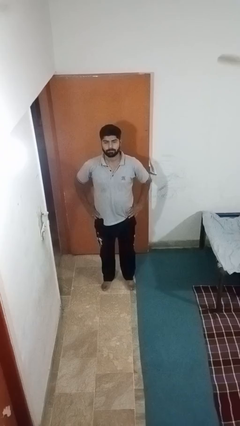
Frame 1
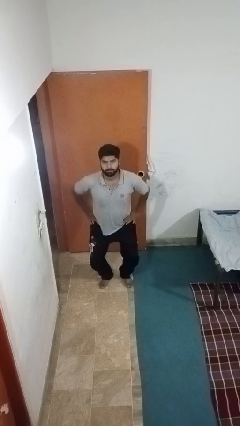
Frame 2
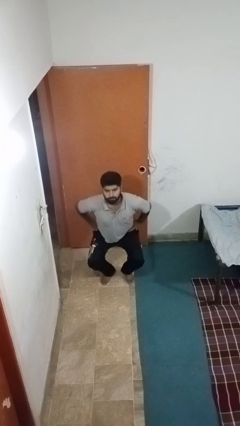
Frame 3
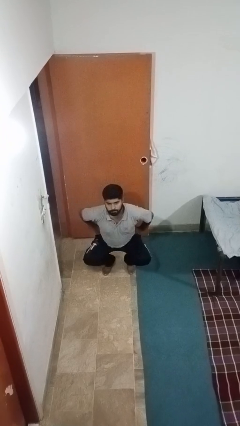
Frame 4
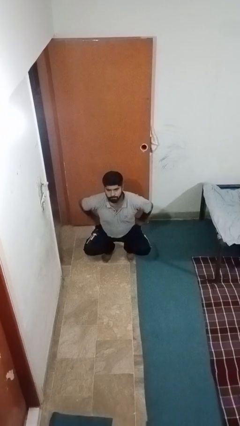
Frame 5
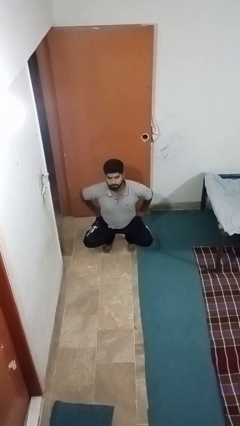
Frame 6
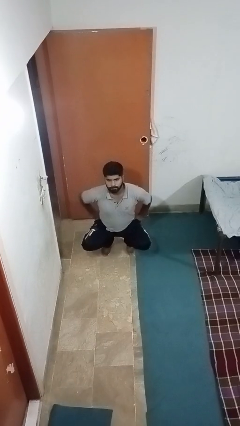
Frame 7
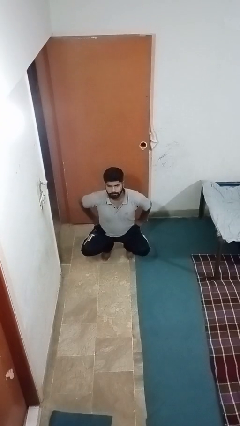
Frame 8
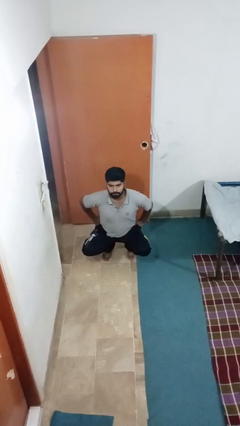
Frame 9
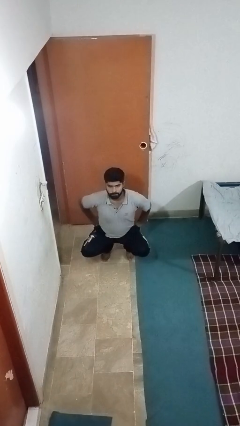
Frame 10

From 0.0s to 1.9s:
person squats

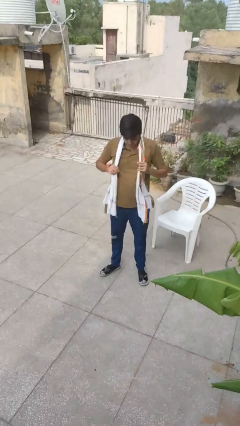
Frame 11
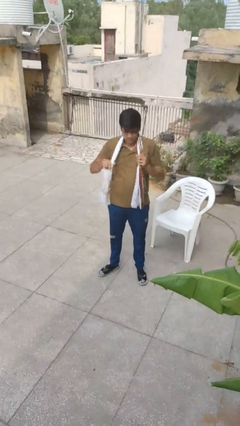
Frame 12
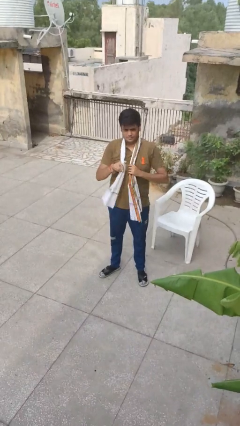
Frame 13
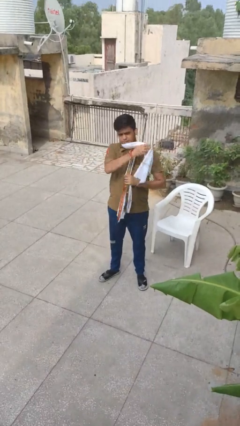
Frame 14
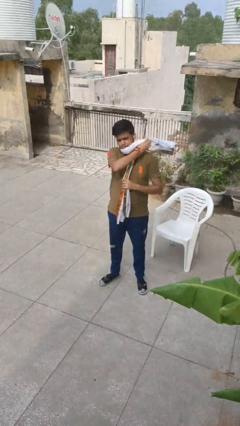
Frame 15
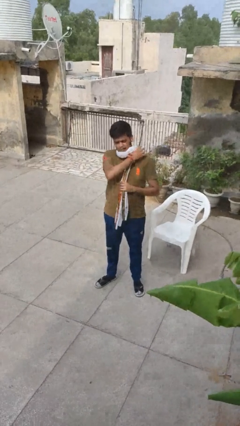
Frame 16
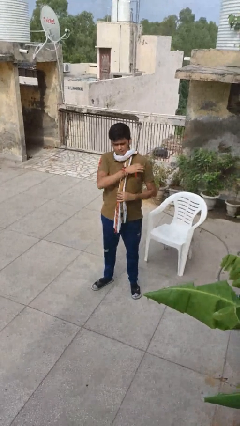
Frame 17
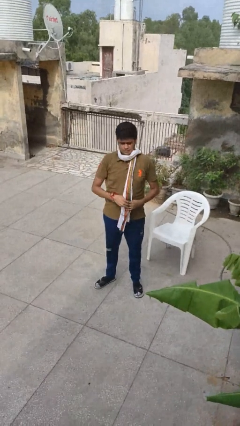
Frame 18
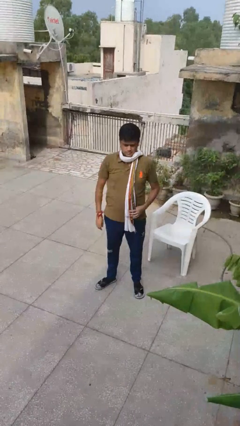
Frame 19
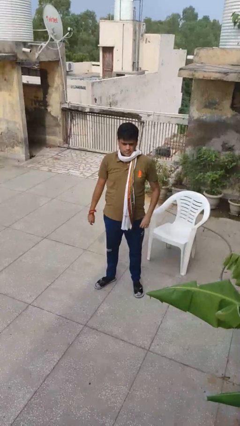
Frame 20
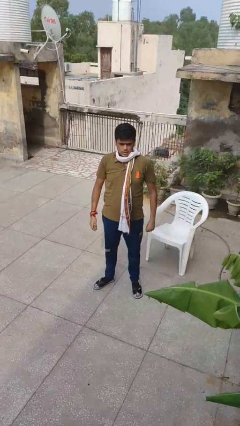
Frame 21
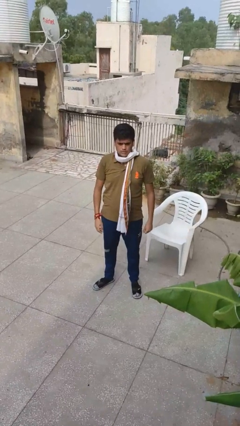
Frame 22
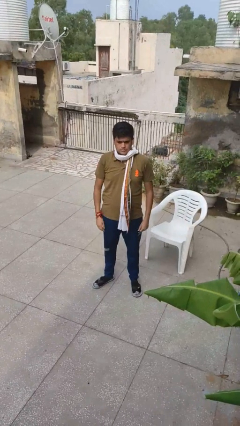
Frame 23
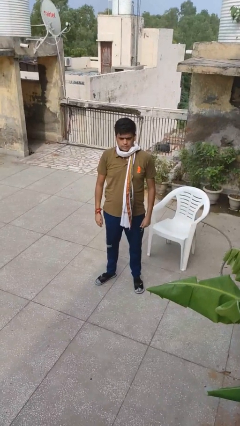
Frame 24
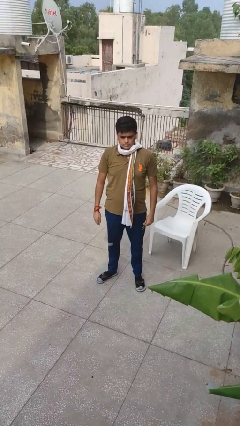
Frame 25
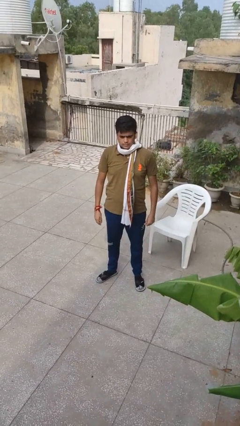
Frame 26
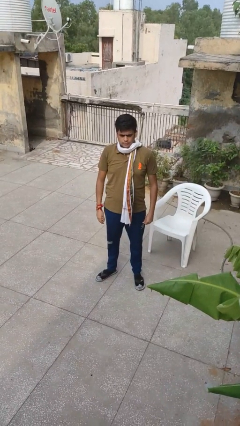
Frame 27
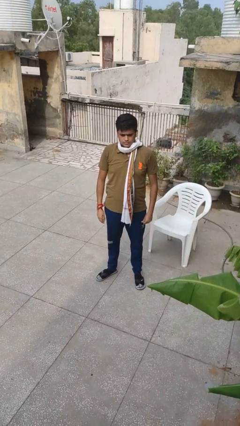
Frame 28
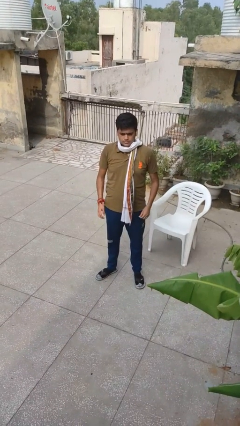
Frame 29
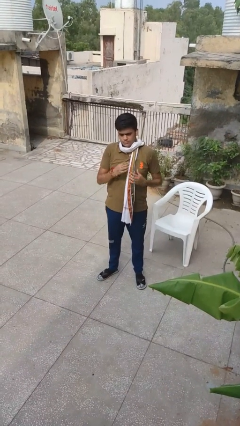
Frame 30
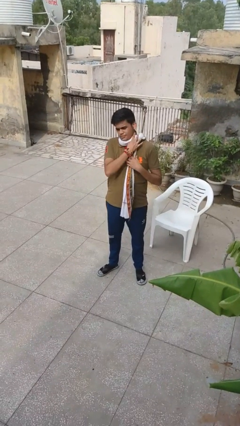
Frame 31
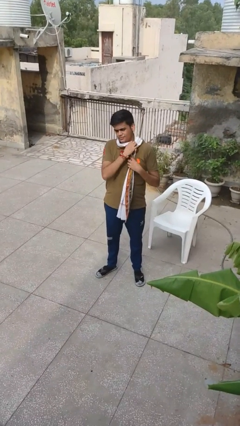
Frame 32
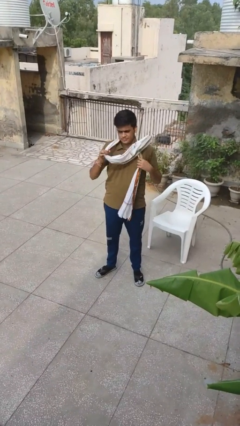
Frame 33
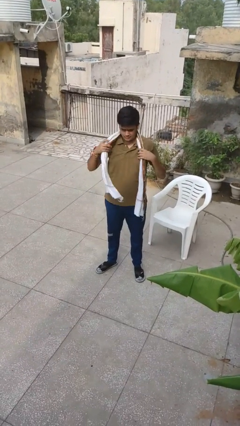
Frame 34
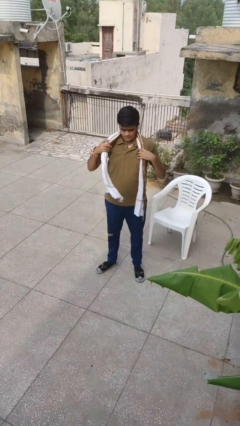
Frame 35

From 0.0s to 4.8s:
person puts on scarf

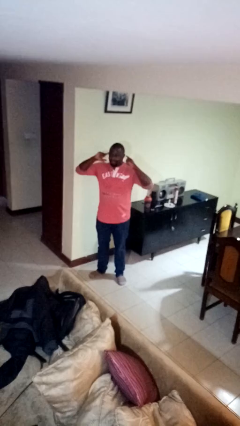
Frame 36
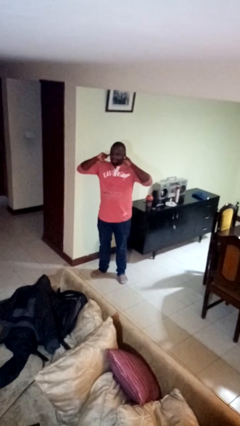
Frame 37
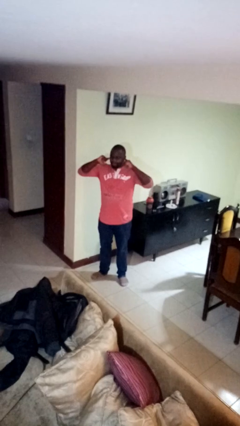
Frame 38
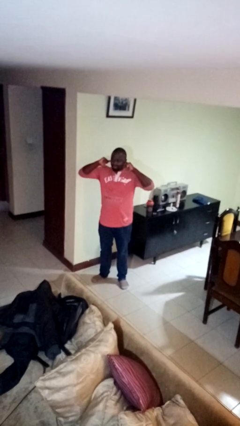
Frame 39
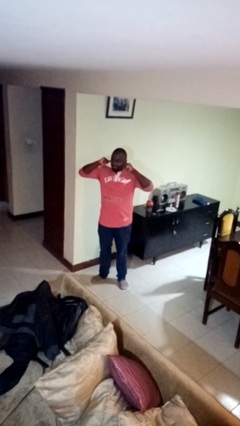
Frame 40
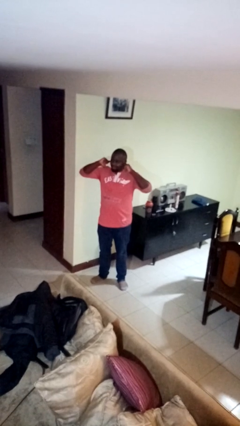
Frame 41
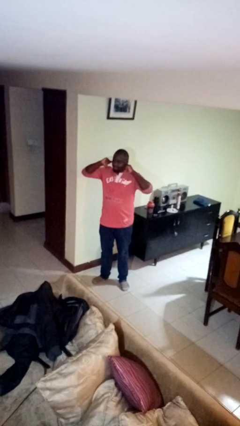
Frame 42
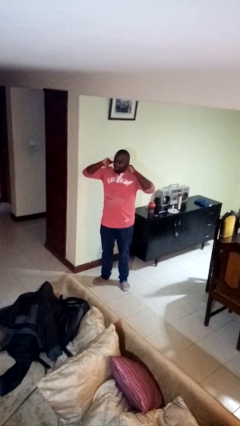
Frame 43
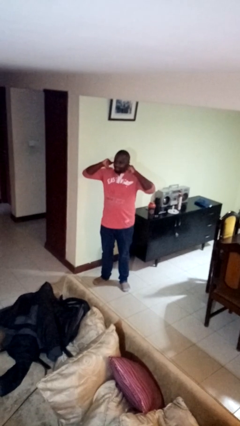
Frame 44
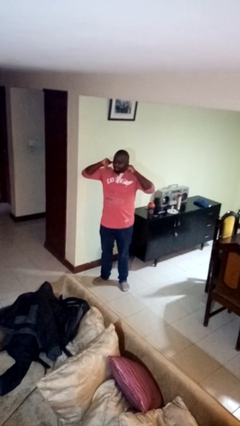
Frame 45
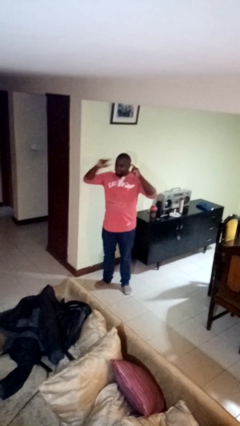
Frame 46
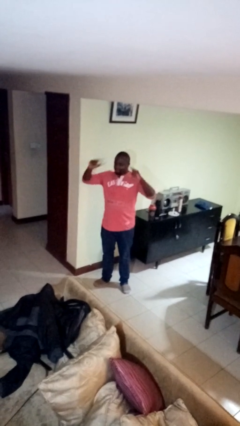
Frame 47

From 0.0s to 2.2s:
person puts fingers in ear

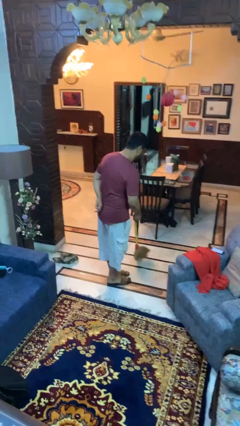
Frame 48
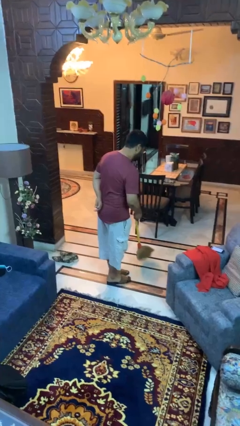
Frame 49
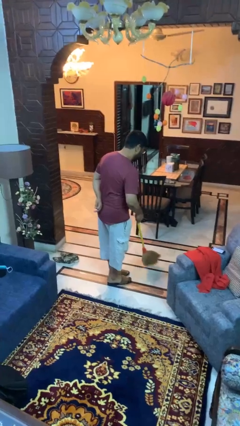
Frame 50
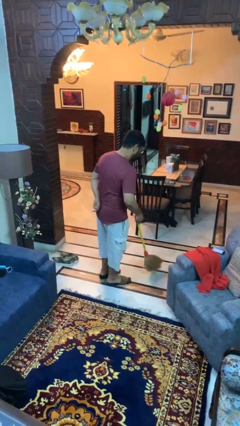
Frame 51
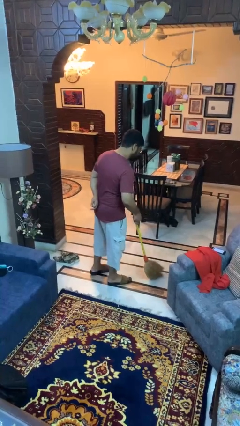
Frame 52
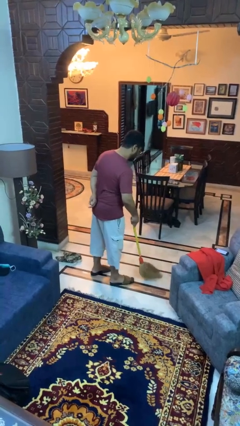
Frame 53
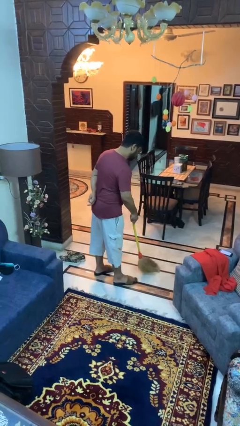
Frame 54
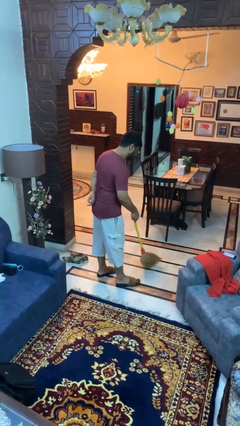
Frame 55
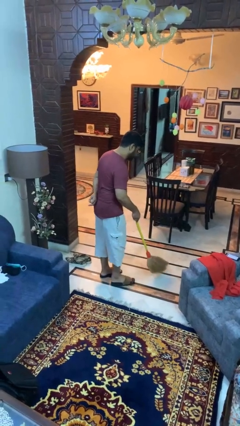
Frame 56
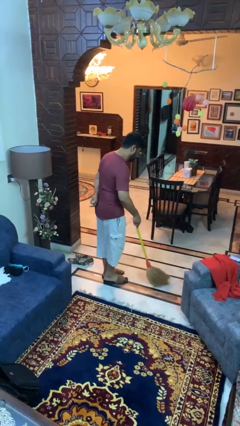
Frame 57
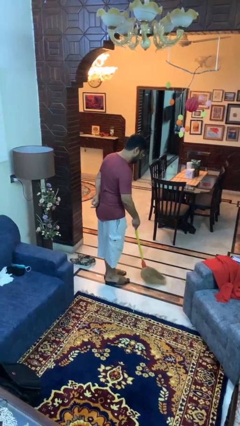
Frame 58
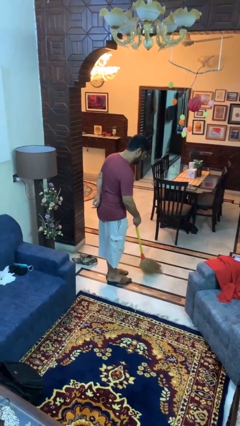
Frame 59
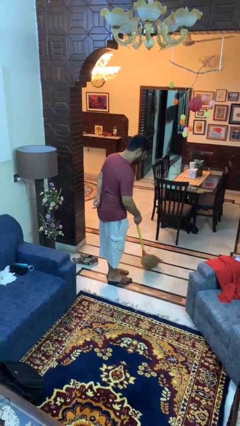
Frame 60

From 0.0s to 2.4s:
person sweeps floor

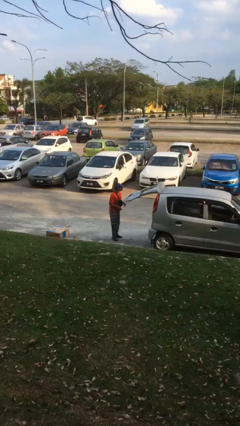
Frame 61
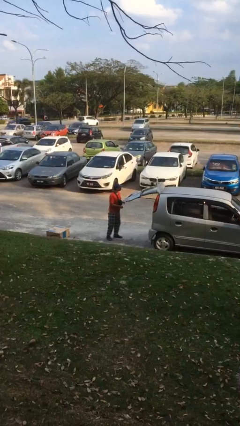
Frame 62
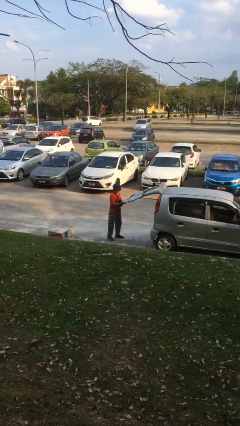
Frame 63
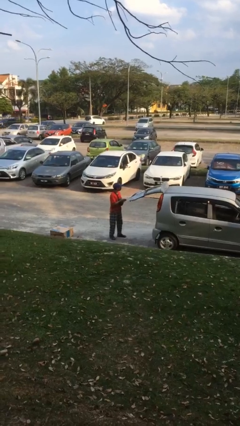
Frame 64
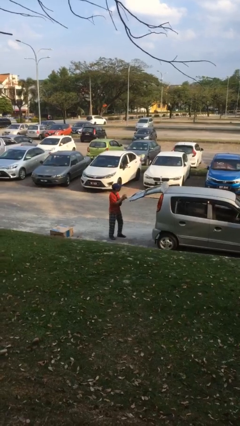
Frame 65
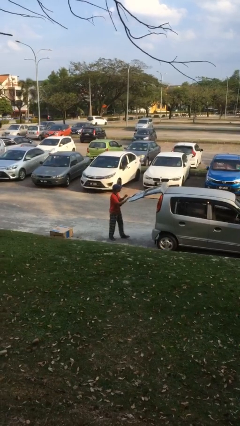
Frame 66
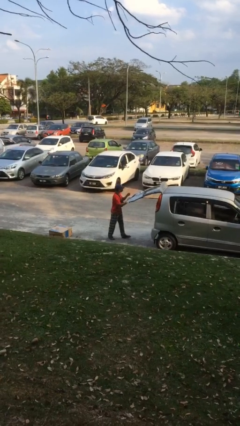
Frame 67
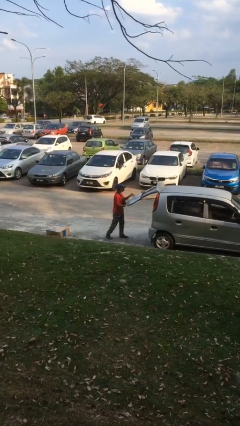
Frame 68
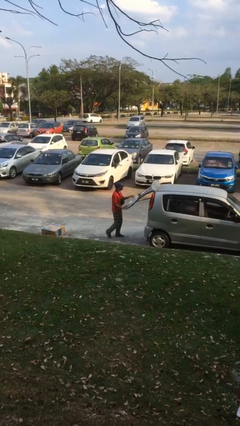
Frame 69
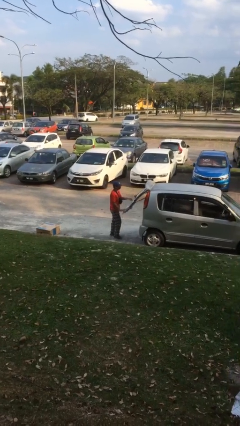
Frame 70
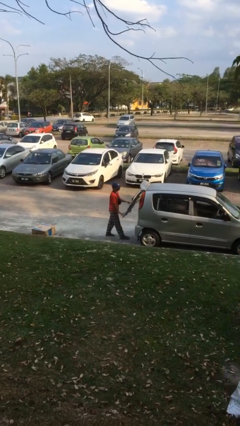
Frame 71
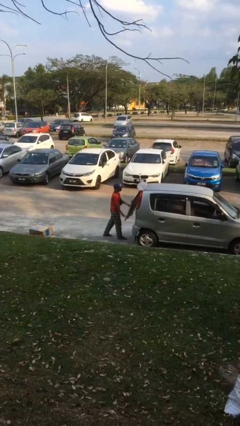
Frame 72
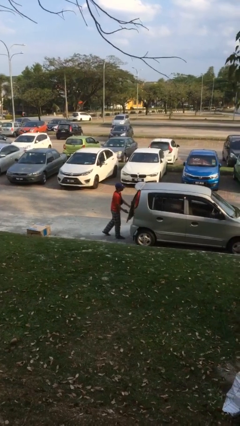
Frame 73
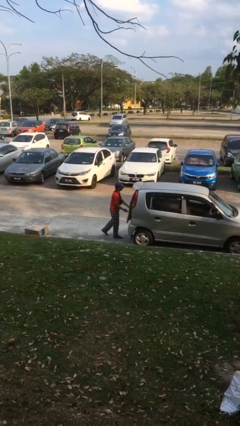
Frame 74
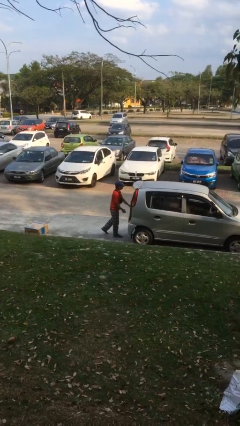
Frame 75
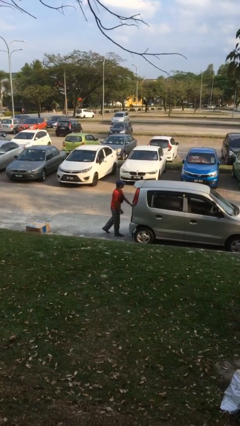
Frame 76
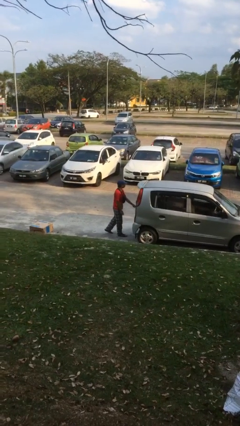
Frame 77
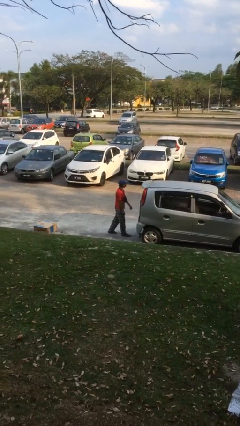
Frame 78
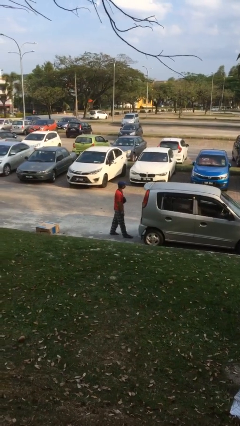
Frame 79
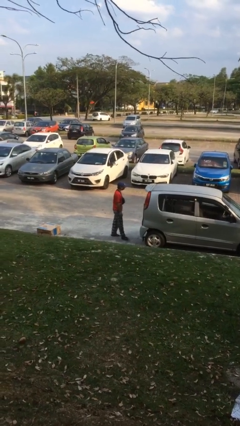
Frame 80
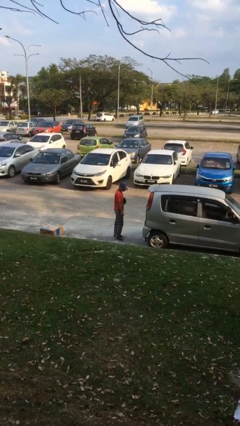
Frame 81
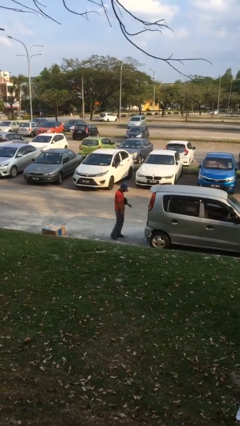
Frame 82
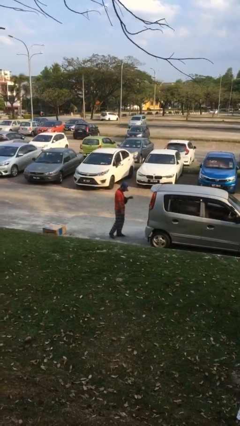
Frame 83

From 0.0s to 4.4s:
person closes car trunk

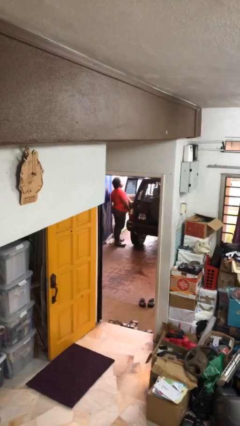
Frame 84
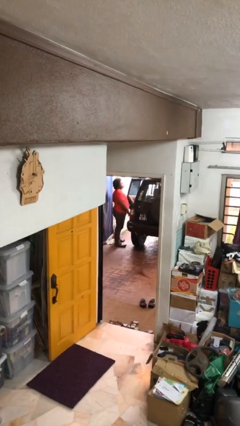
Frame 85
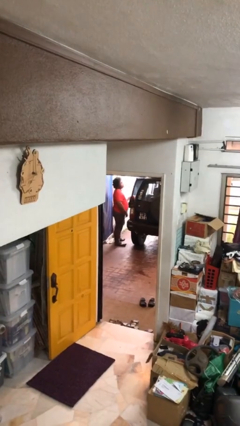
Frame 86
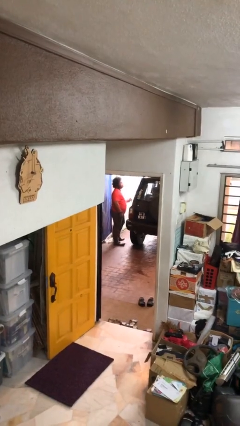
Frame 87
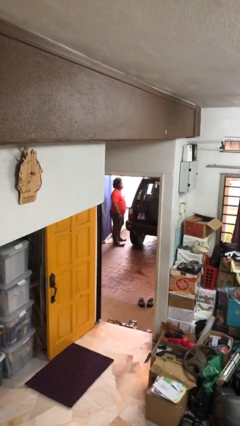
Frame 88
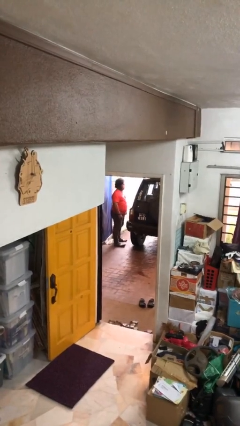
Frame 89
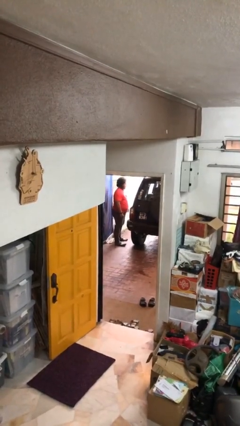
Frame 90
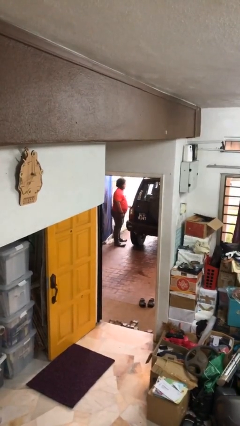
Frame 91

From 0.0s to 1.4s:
person closes car door
